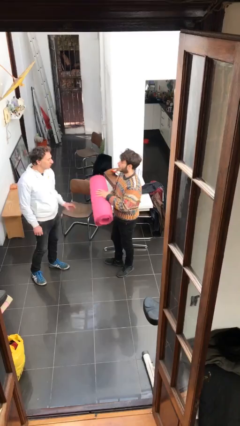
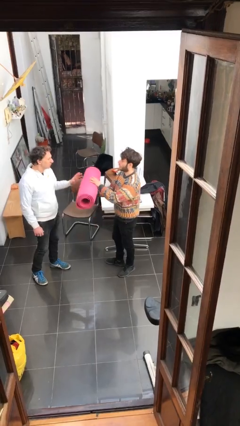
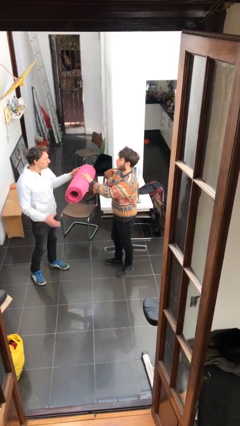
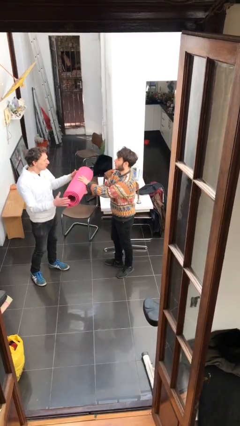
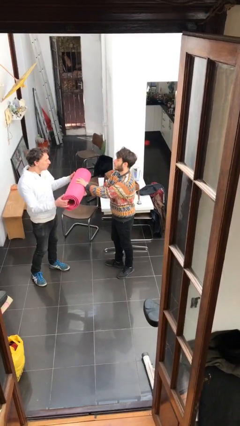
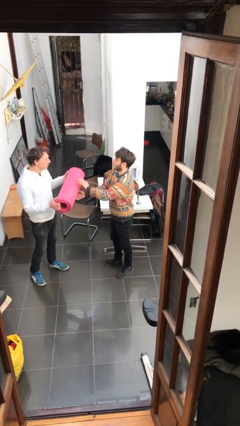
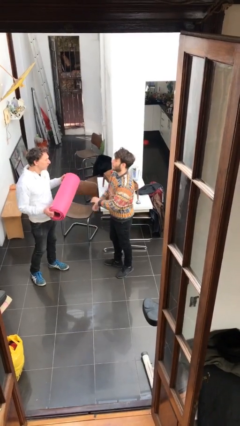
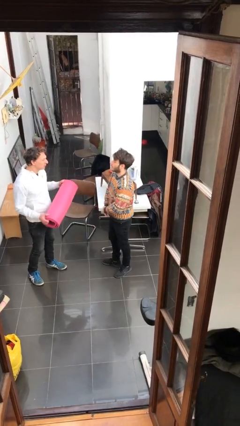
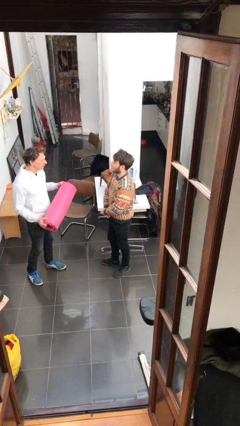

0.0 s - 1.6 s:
person transfers object to person

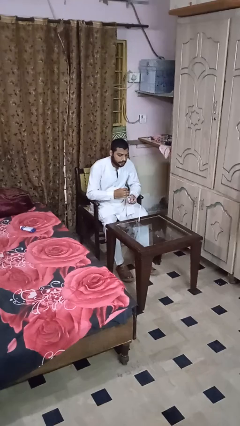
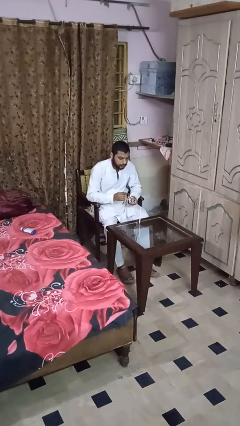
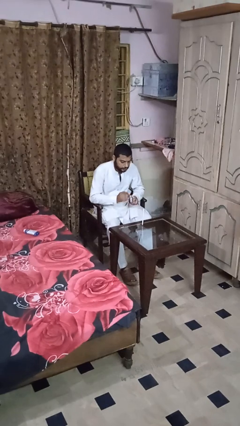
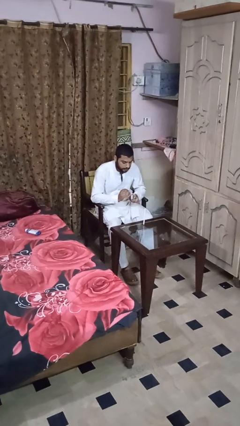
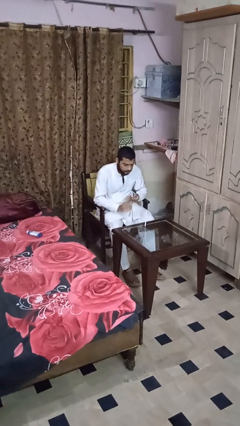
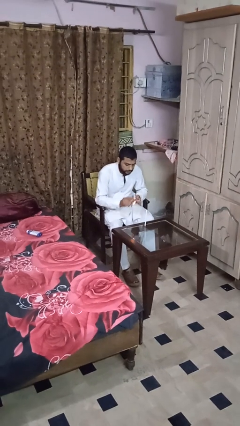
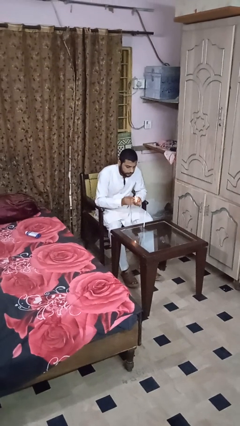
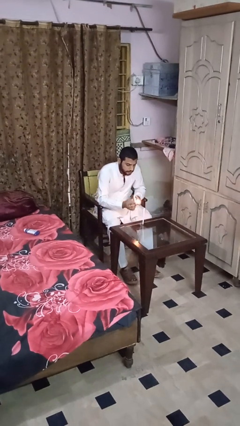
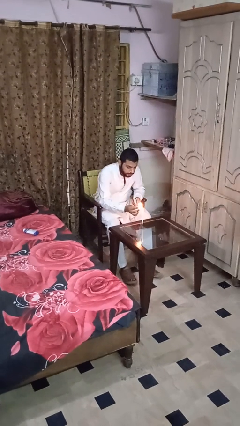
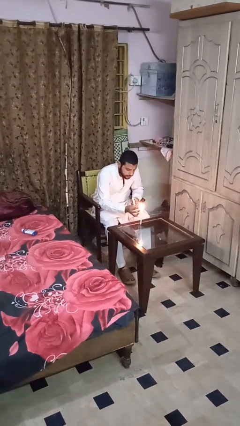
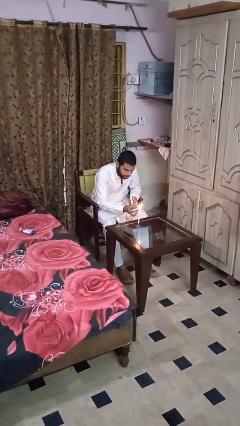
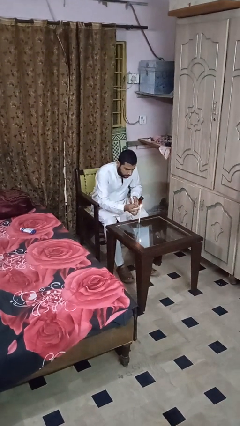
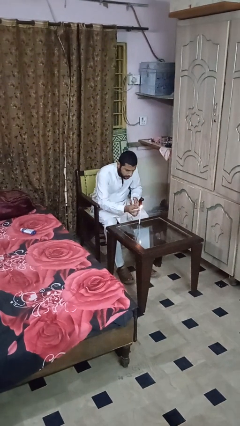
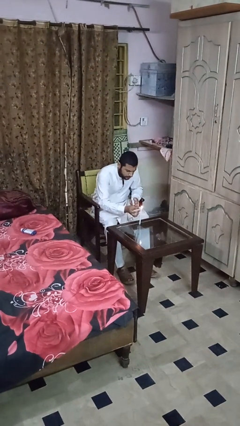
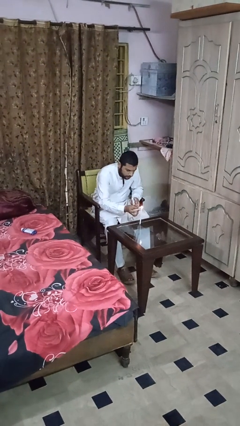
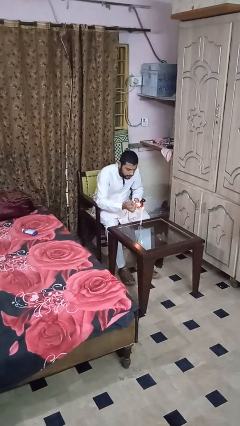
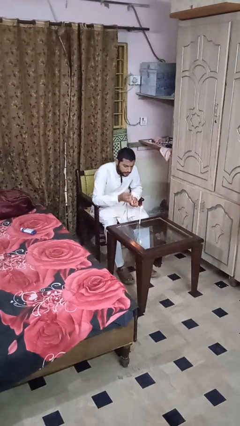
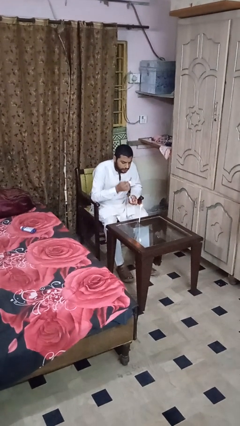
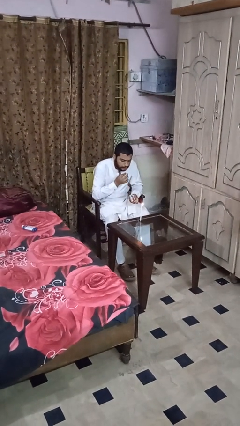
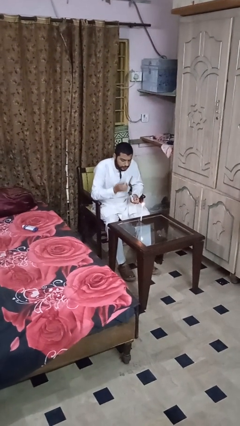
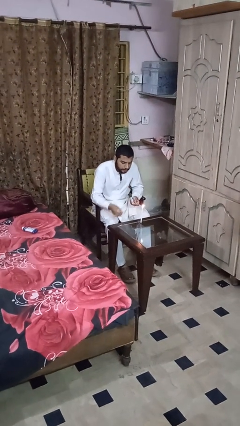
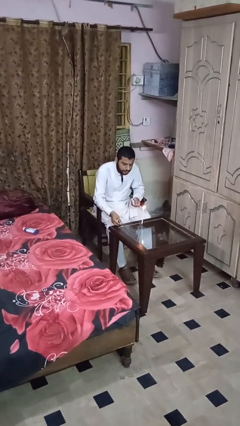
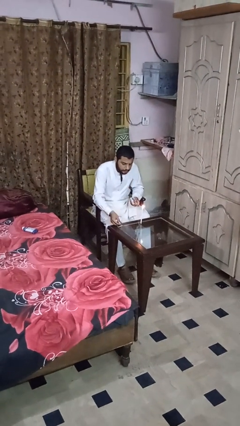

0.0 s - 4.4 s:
person lights candle

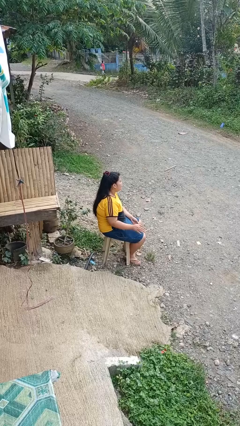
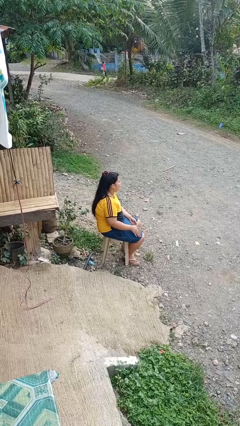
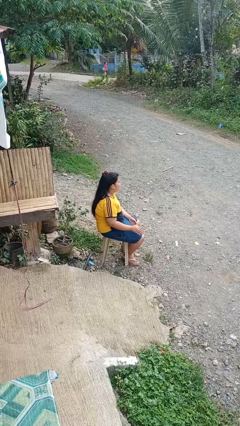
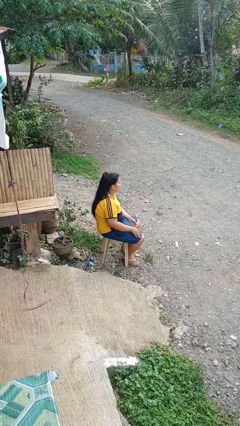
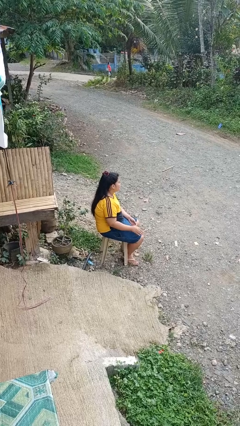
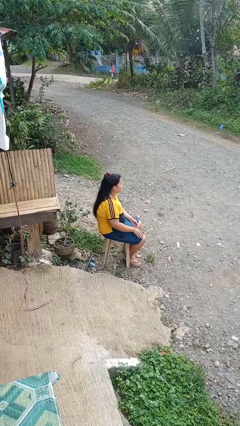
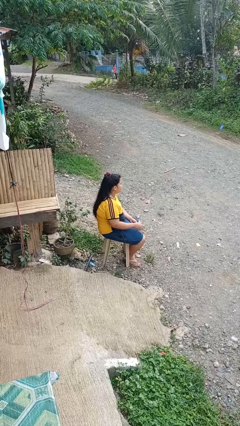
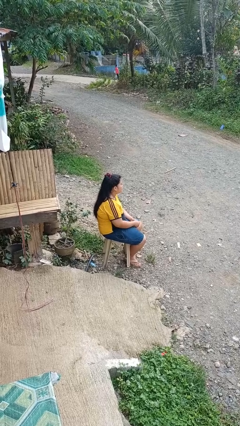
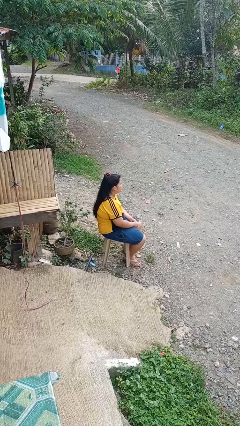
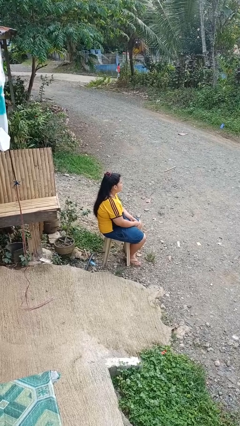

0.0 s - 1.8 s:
person slaps hands on thighs

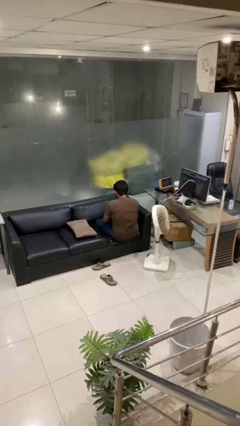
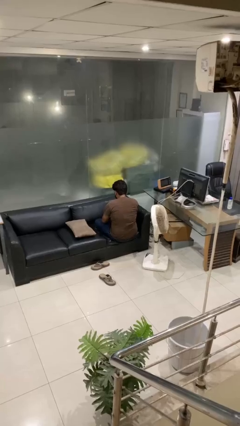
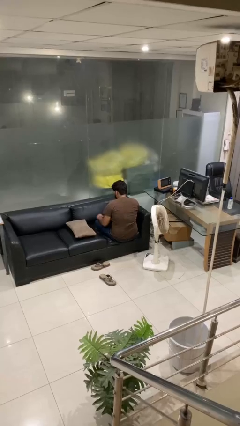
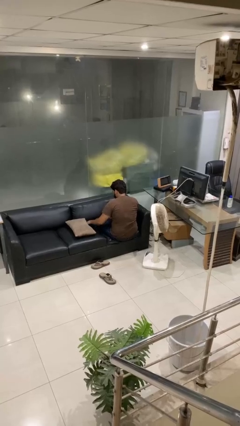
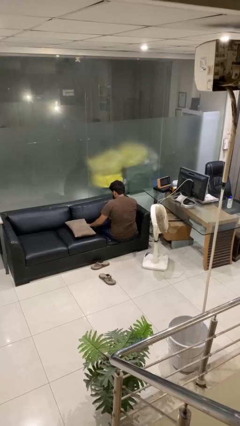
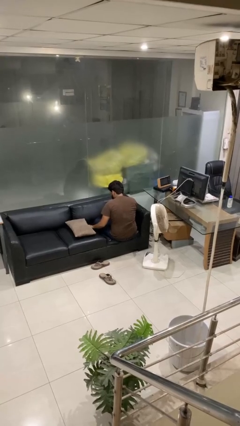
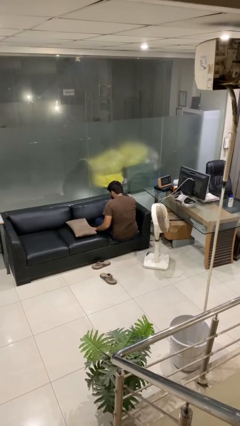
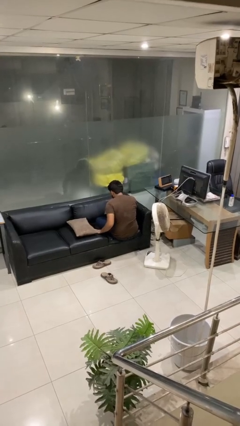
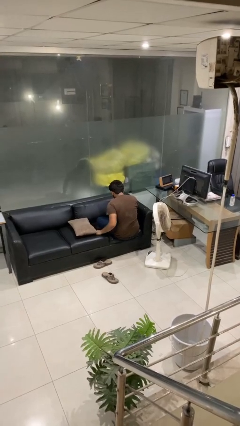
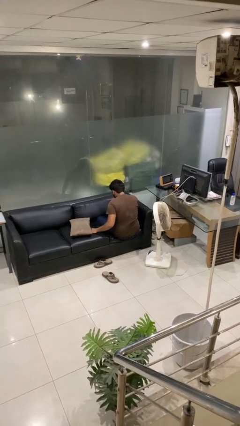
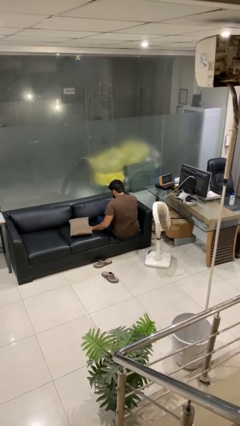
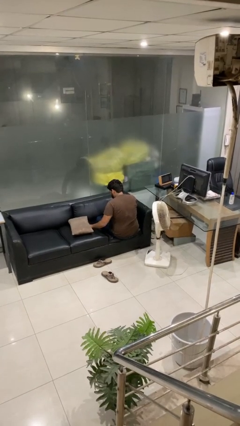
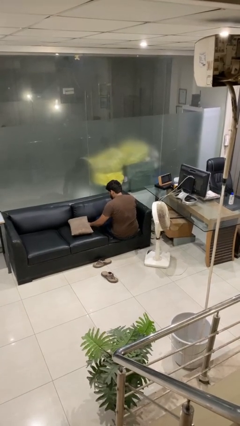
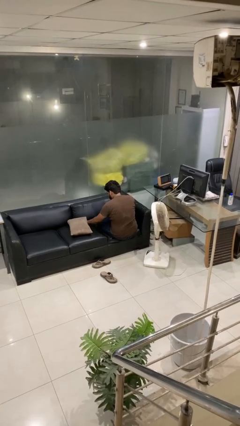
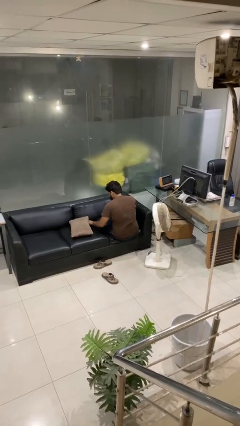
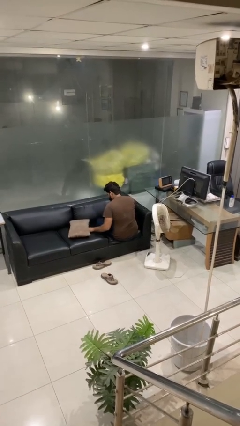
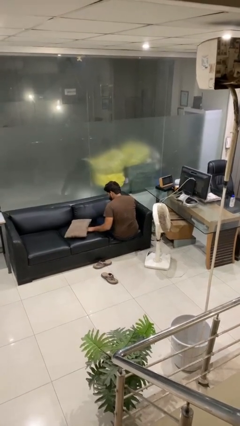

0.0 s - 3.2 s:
person searches in couch

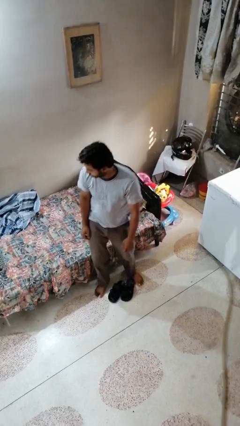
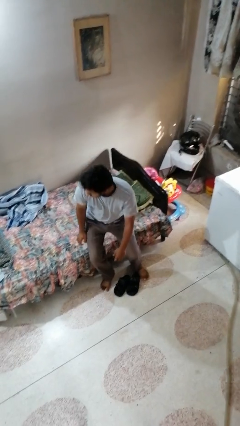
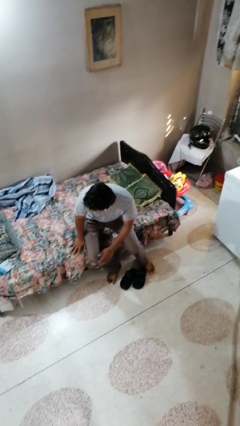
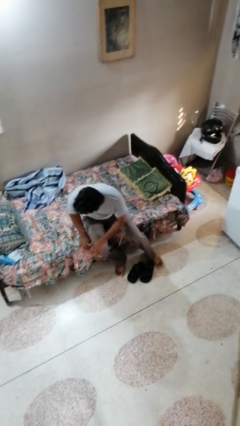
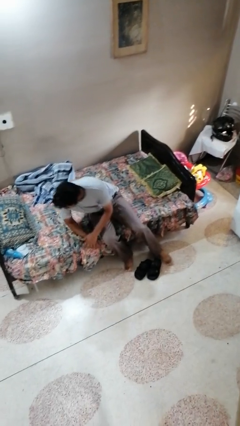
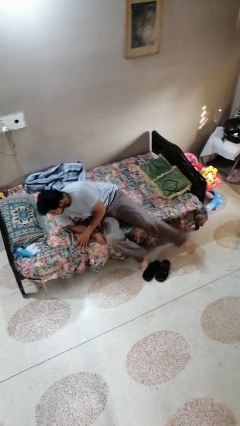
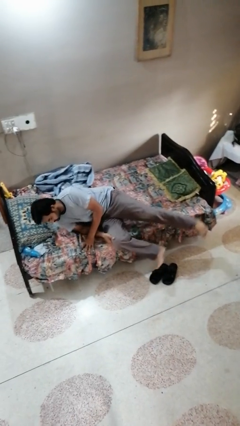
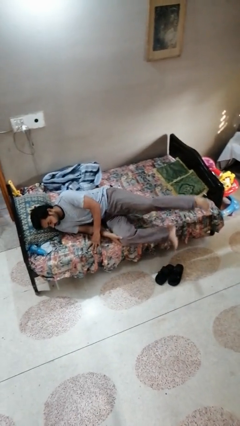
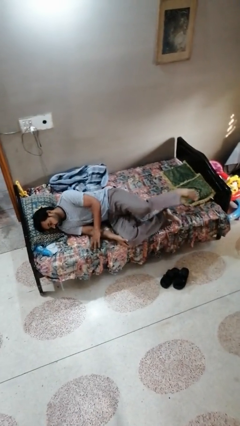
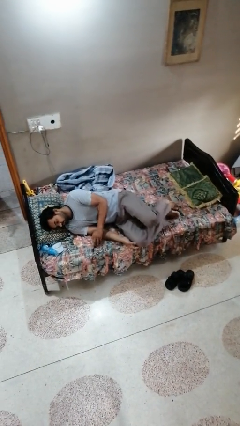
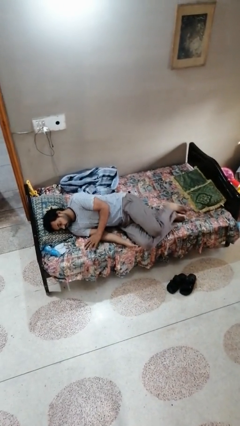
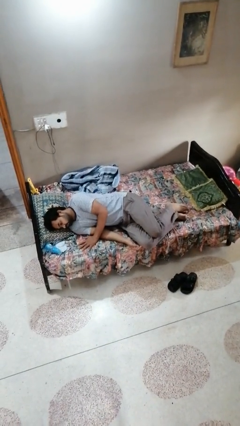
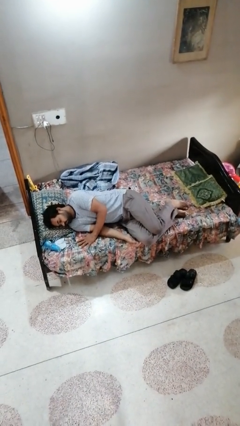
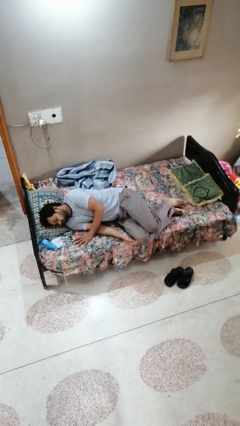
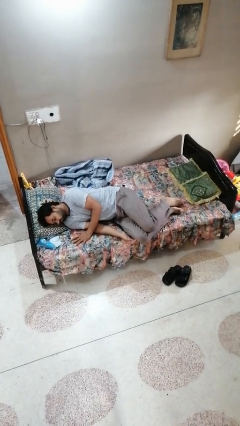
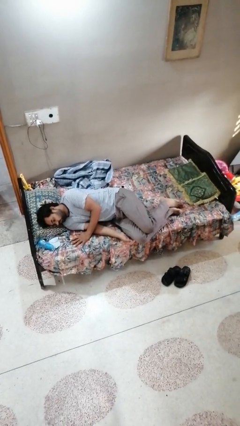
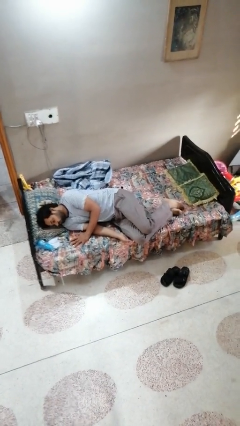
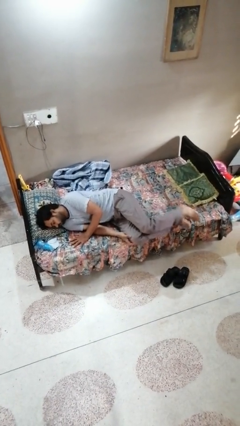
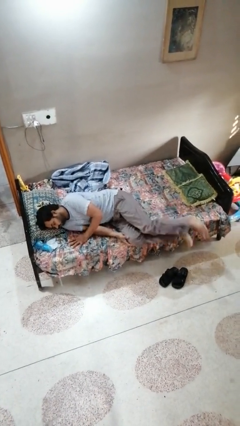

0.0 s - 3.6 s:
person lies down on bed

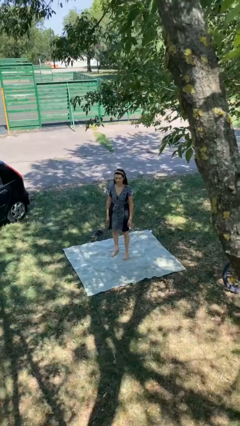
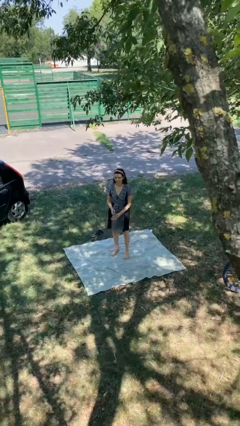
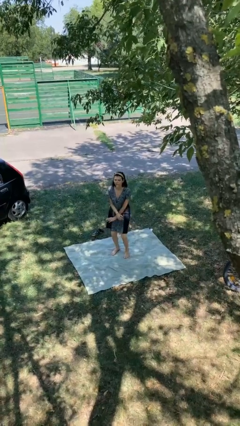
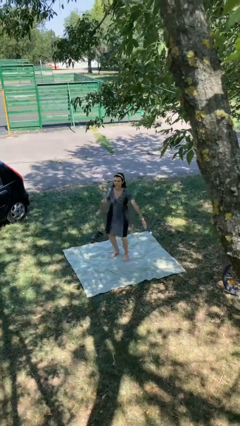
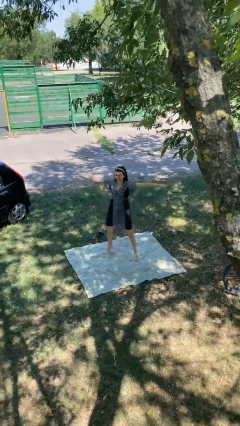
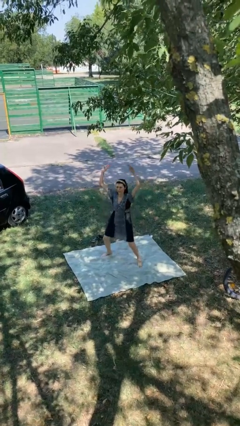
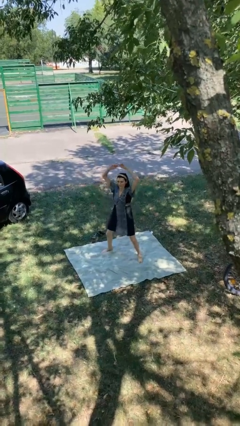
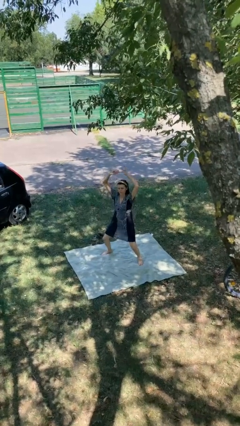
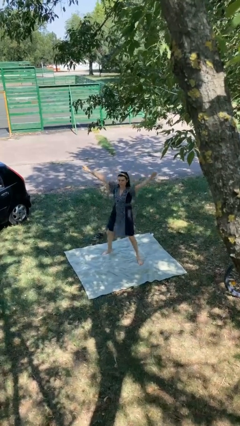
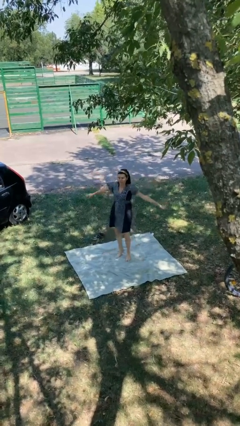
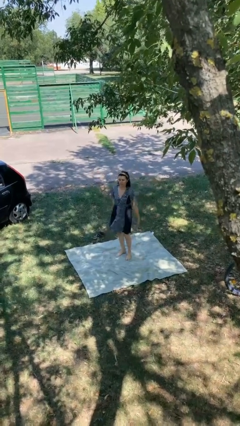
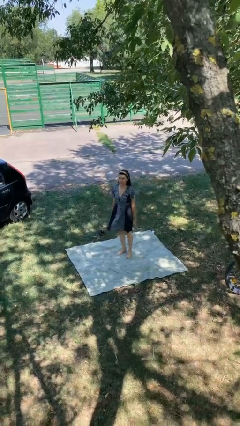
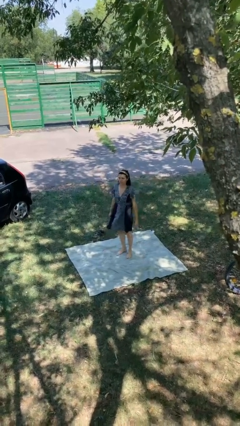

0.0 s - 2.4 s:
person exercises with jumping jacks

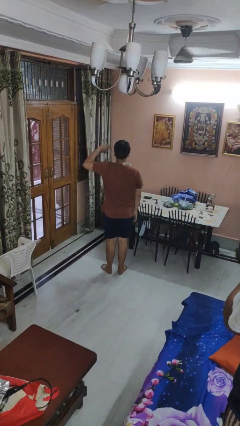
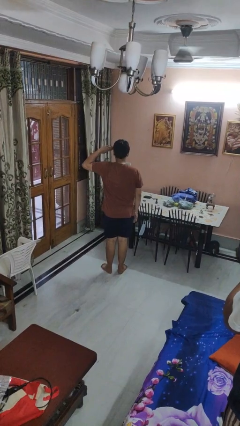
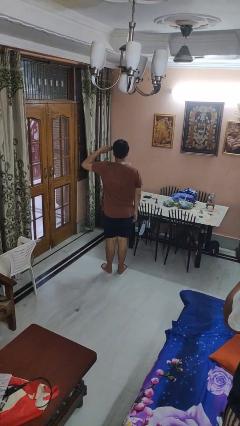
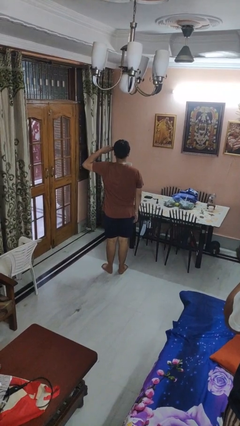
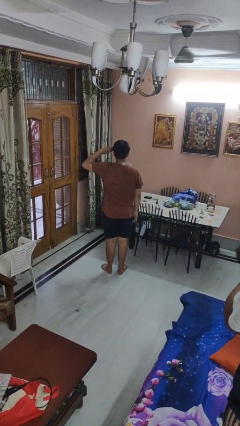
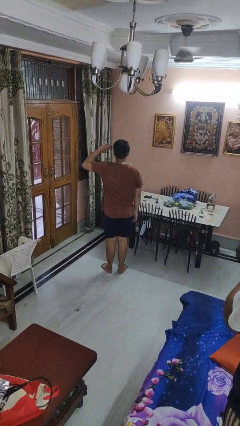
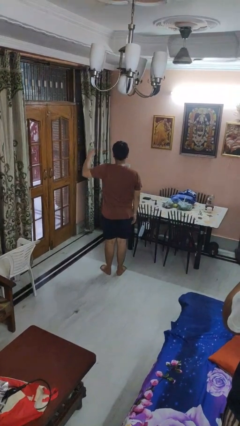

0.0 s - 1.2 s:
person salutes
